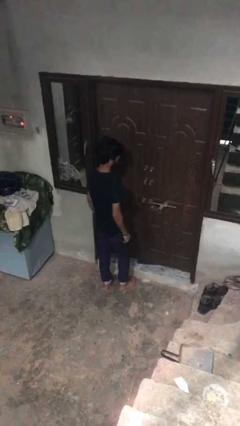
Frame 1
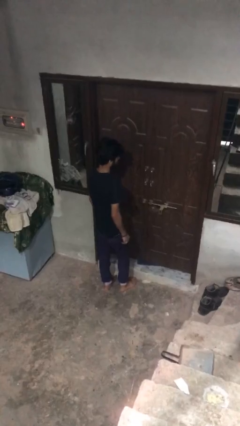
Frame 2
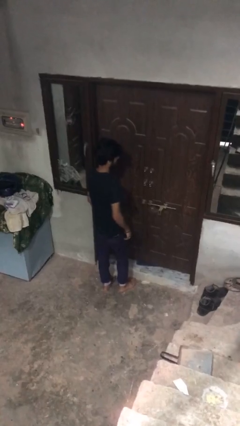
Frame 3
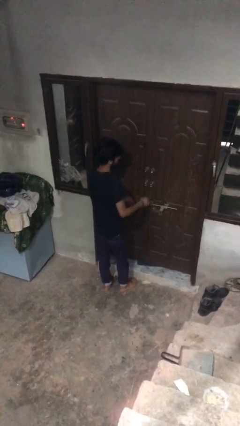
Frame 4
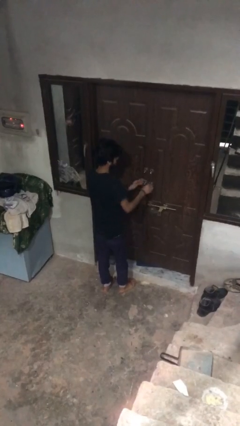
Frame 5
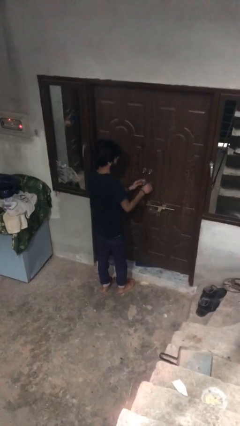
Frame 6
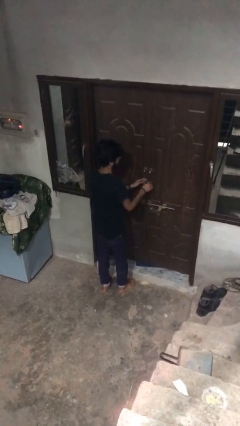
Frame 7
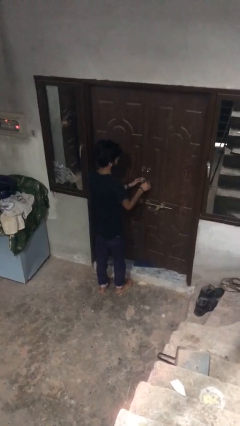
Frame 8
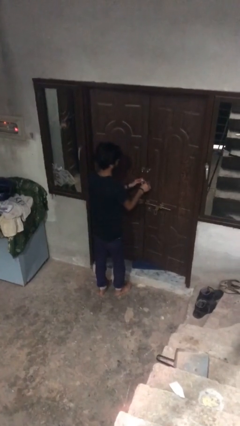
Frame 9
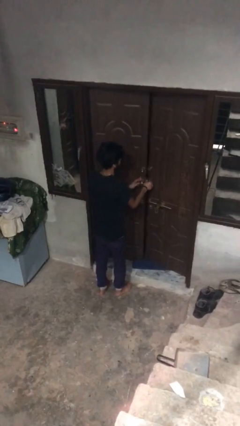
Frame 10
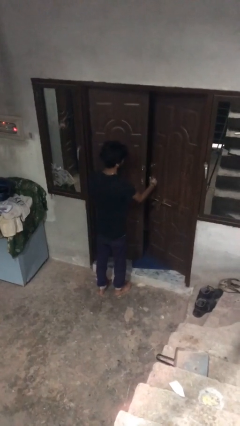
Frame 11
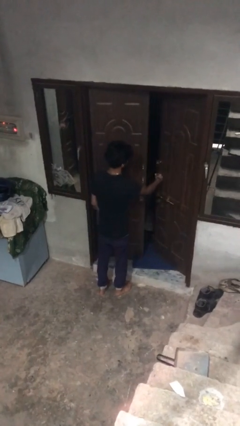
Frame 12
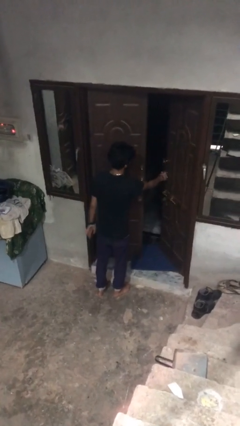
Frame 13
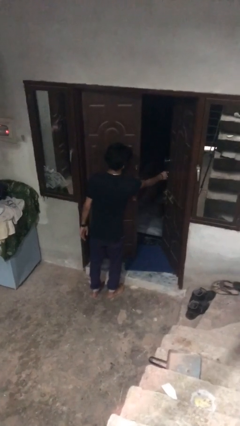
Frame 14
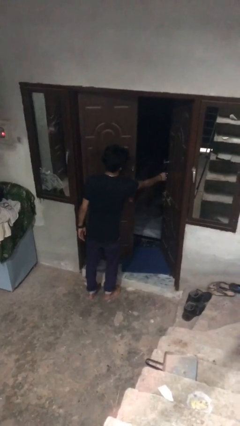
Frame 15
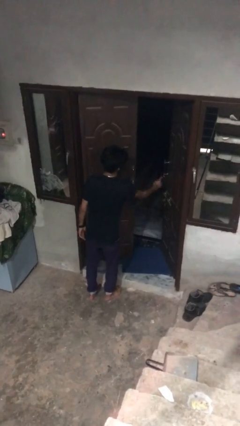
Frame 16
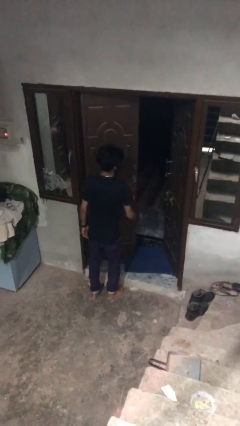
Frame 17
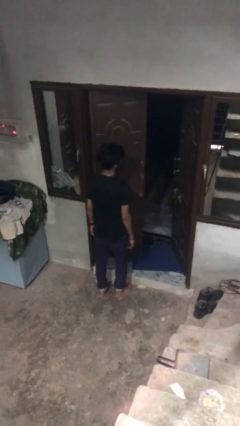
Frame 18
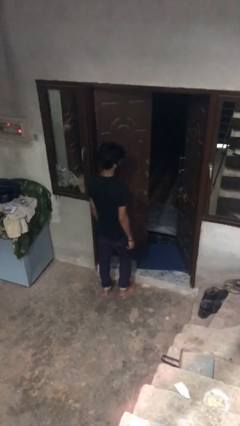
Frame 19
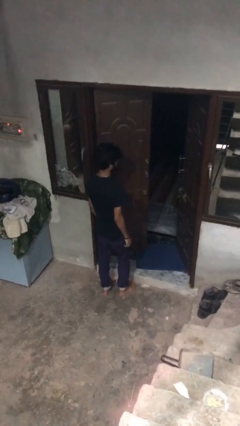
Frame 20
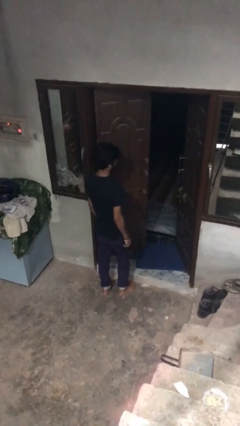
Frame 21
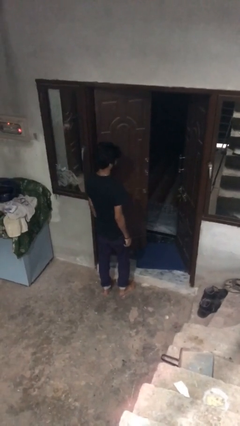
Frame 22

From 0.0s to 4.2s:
person opens facility door

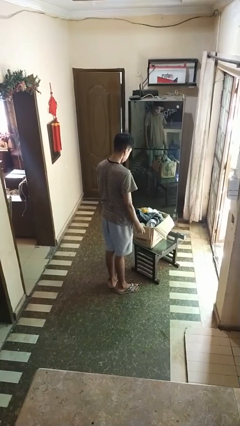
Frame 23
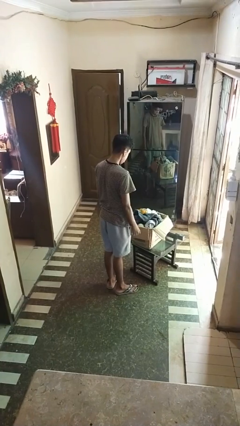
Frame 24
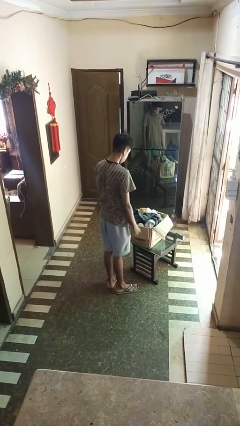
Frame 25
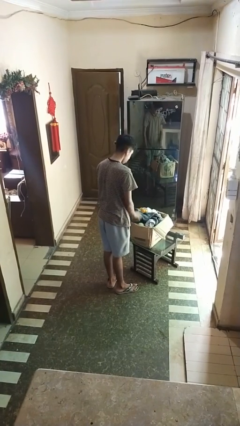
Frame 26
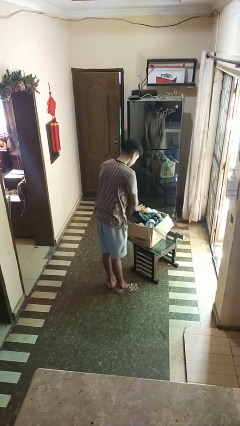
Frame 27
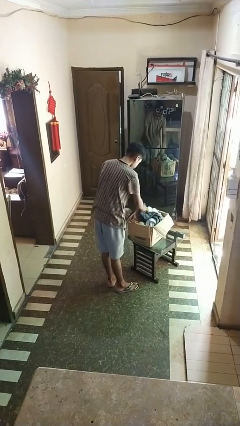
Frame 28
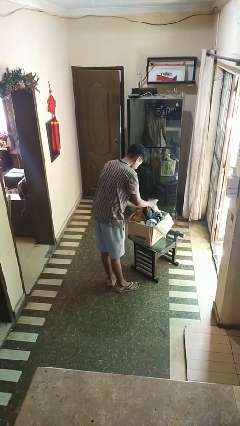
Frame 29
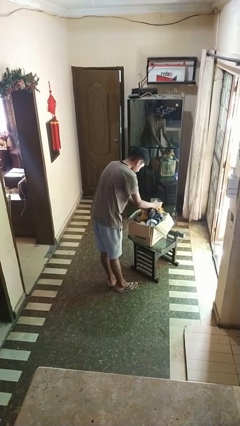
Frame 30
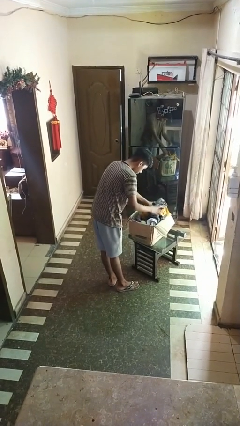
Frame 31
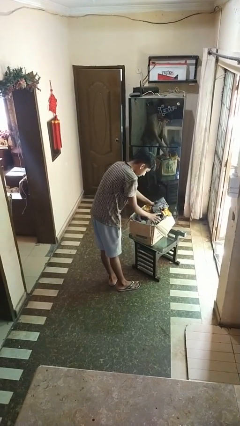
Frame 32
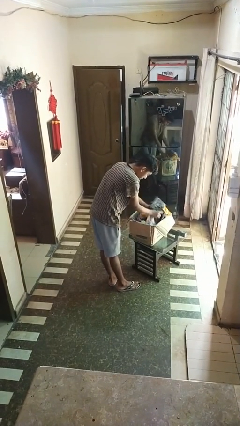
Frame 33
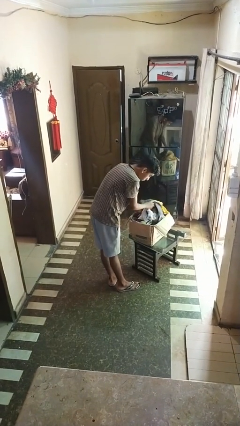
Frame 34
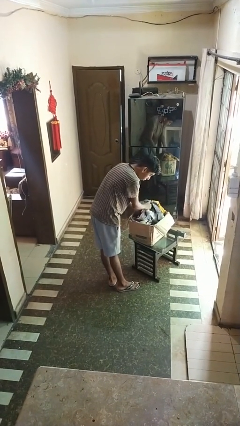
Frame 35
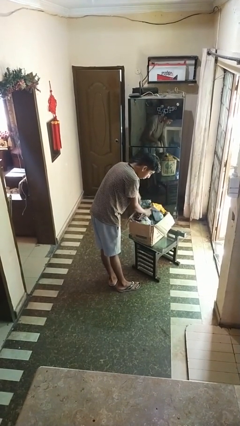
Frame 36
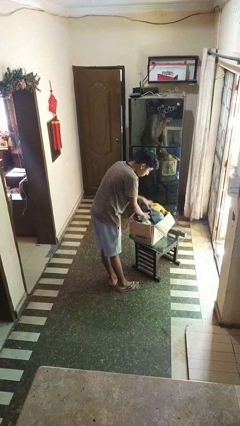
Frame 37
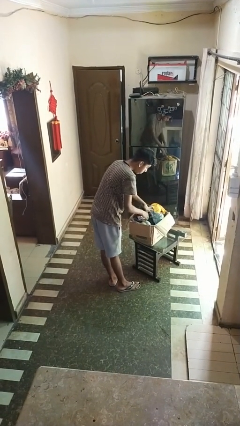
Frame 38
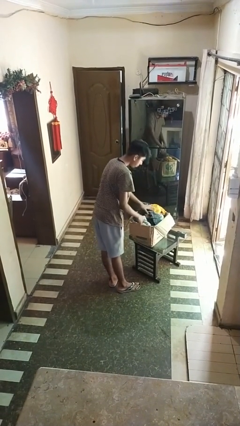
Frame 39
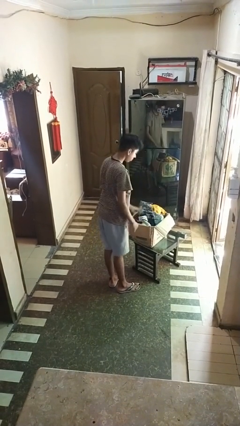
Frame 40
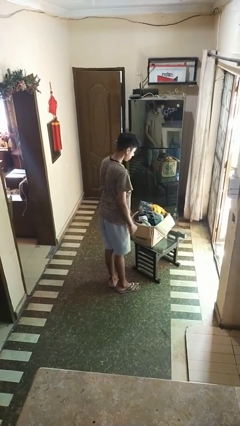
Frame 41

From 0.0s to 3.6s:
person searches in box

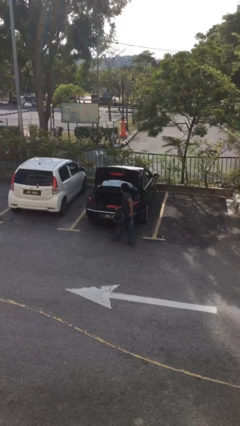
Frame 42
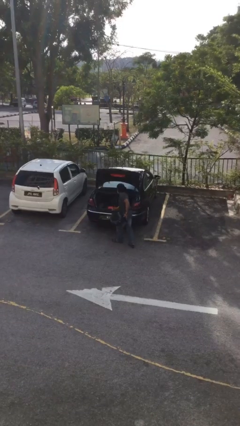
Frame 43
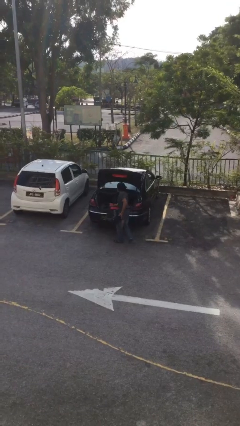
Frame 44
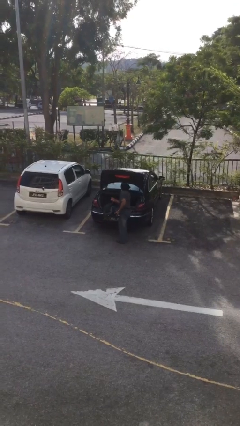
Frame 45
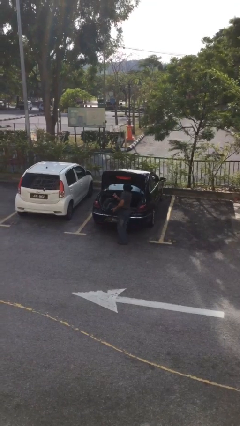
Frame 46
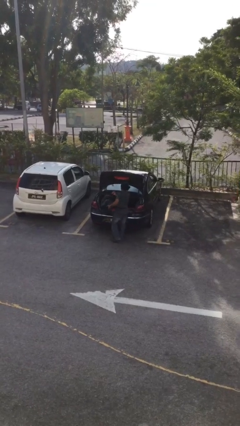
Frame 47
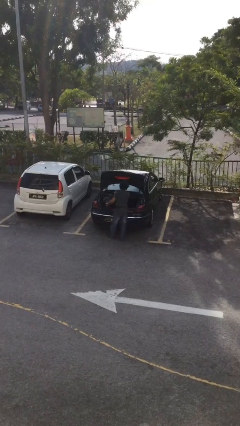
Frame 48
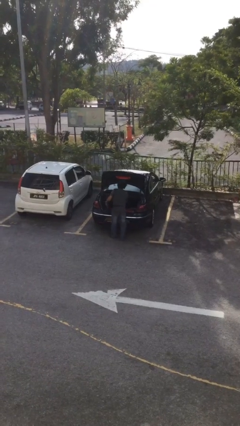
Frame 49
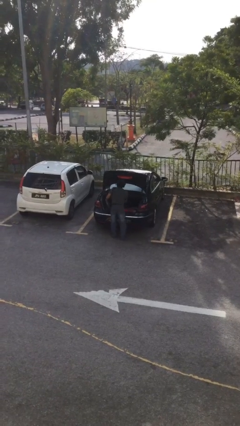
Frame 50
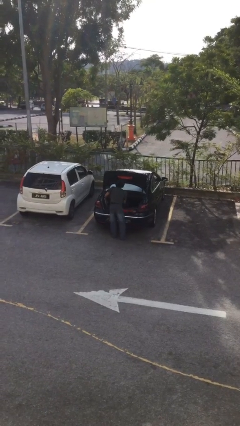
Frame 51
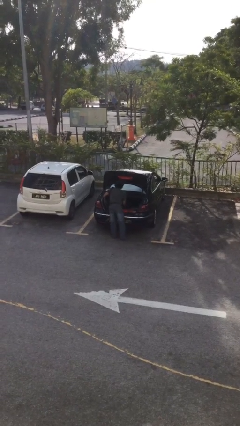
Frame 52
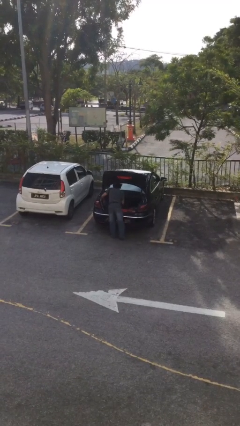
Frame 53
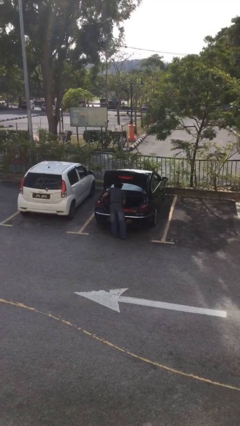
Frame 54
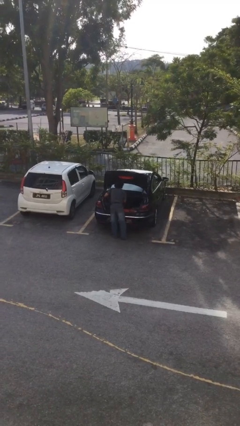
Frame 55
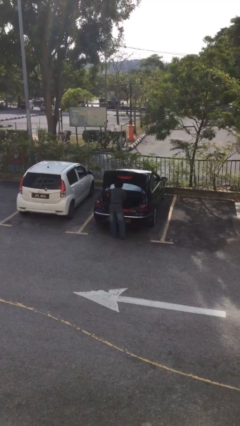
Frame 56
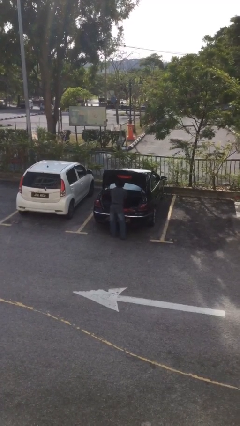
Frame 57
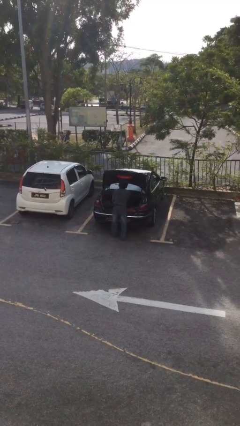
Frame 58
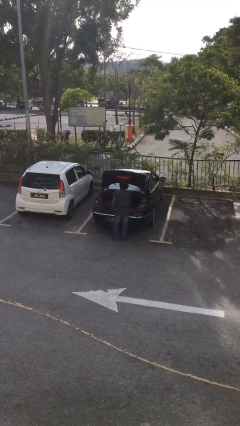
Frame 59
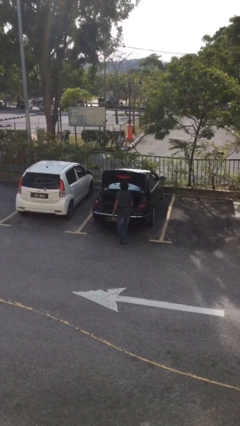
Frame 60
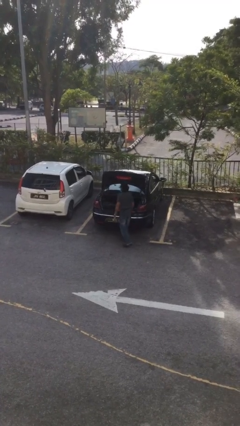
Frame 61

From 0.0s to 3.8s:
person loads car

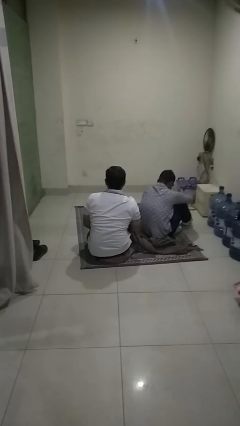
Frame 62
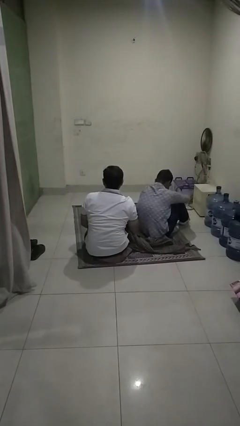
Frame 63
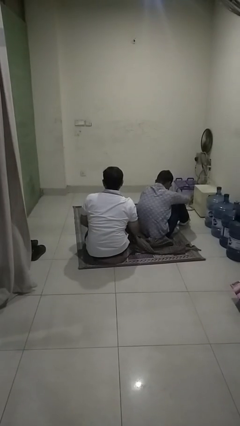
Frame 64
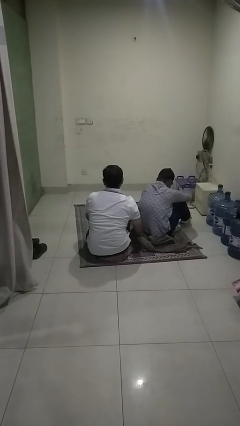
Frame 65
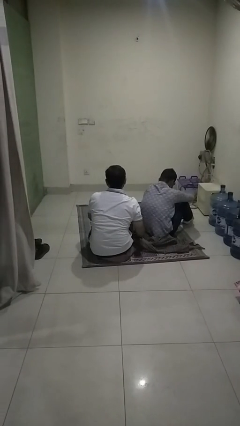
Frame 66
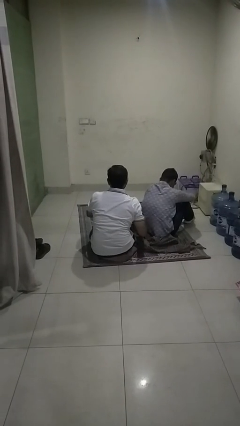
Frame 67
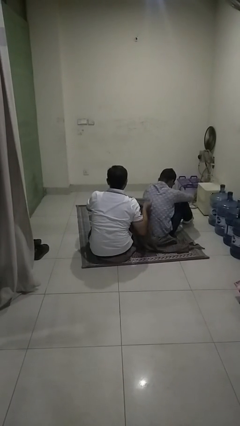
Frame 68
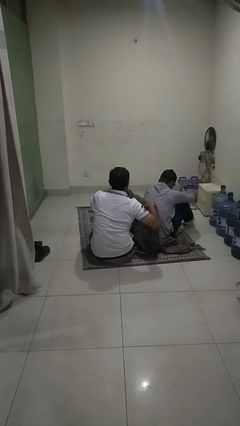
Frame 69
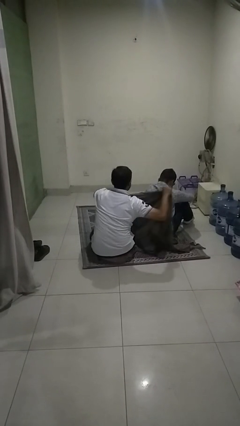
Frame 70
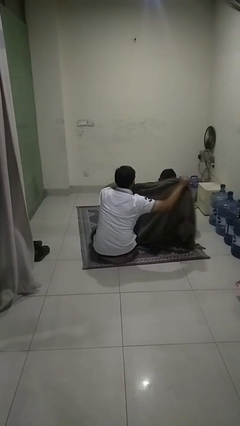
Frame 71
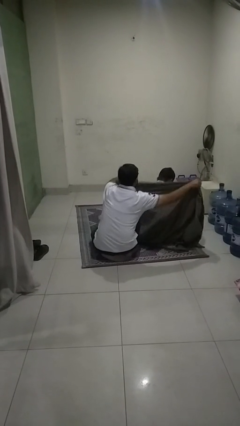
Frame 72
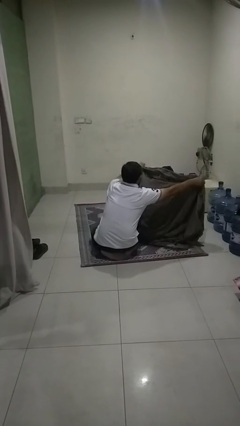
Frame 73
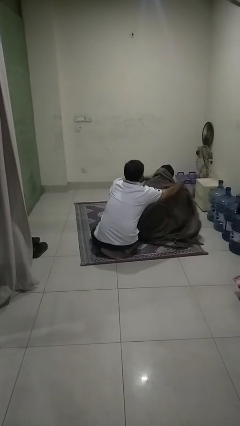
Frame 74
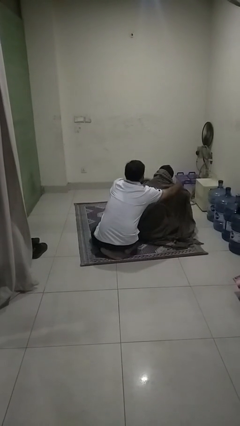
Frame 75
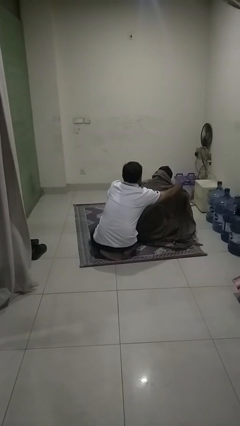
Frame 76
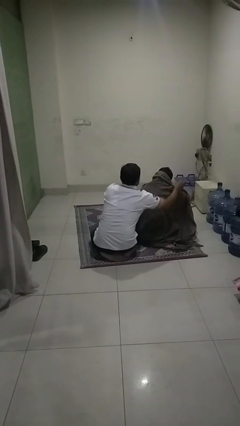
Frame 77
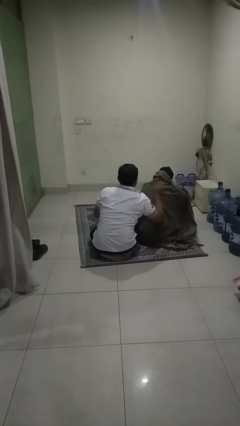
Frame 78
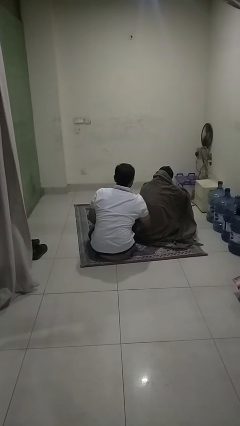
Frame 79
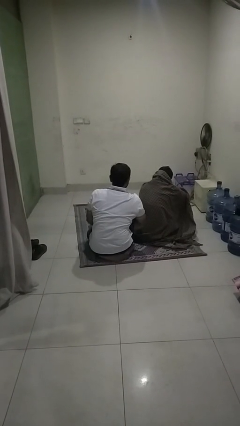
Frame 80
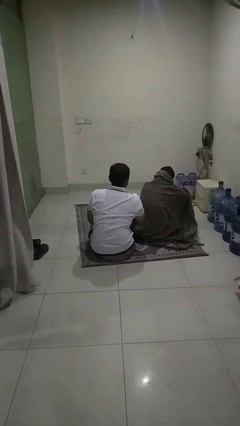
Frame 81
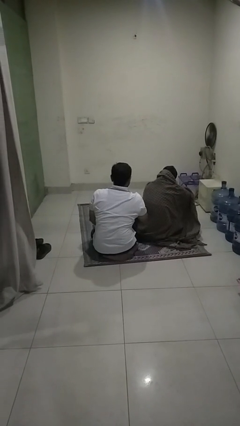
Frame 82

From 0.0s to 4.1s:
person covers friend with blanket

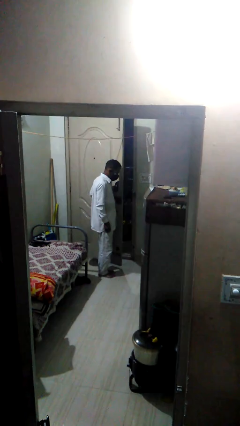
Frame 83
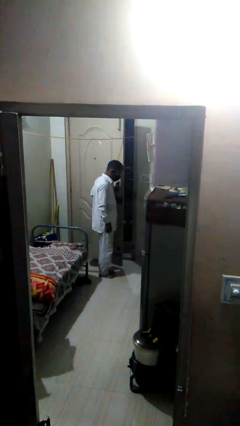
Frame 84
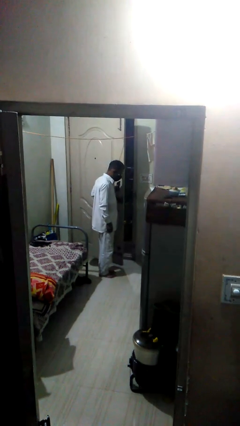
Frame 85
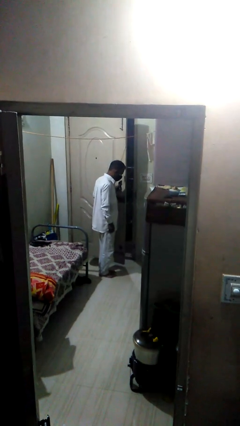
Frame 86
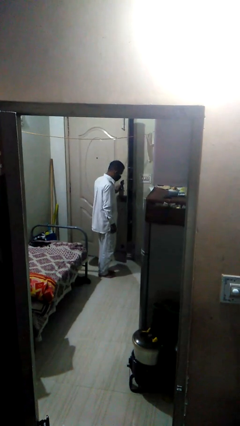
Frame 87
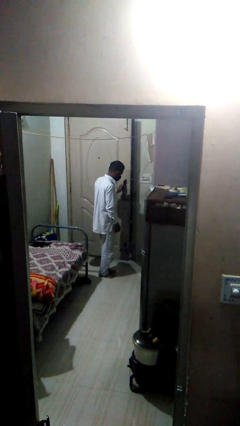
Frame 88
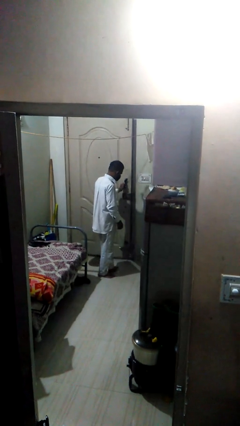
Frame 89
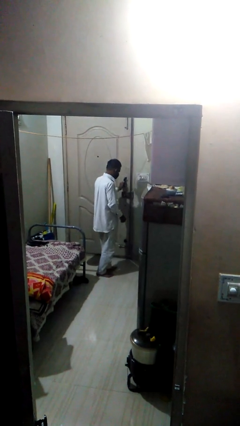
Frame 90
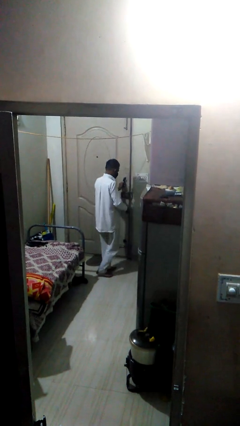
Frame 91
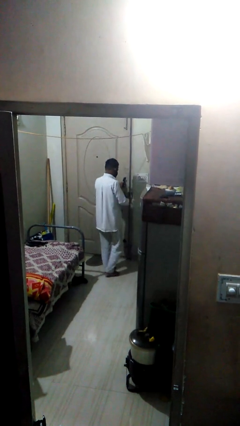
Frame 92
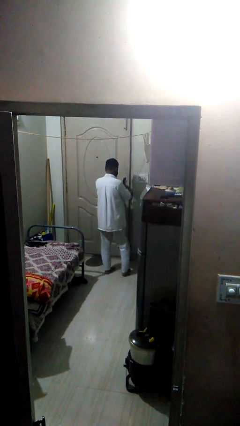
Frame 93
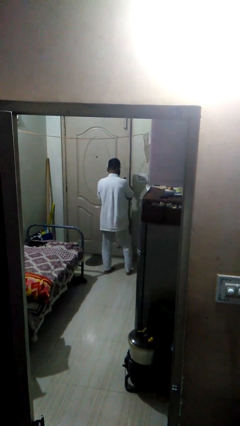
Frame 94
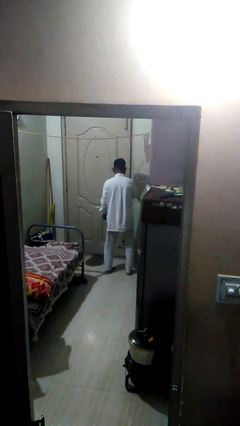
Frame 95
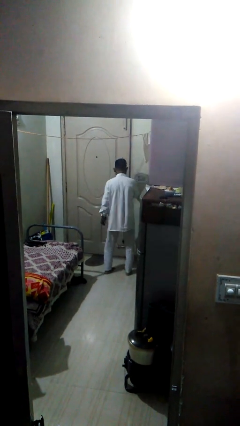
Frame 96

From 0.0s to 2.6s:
person closes facility door
